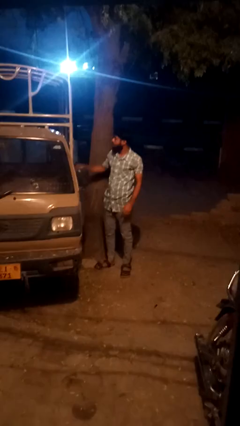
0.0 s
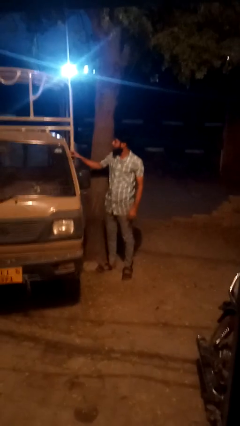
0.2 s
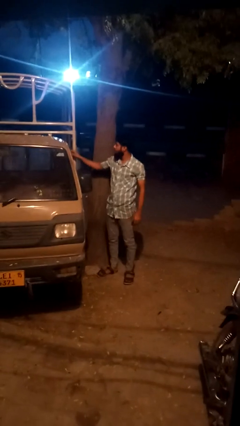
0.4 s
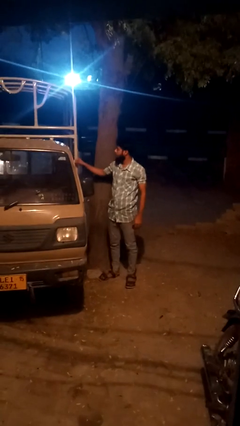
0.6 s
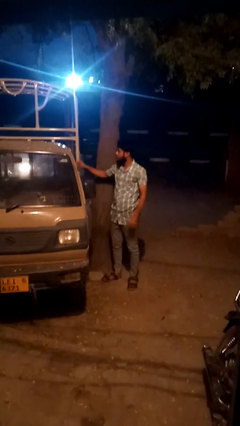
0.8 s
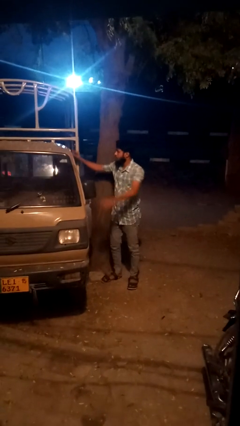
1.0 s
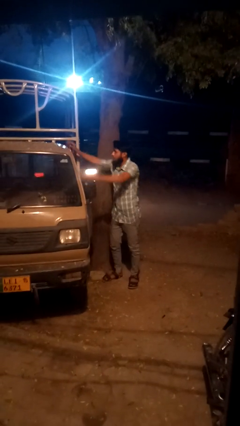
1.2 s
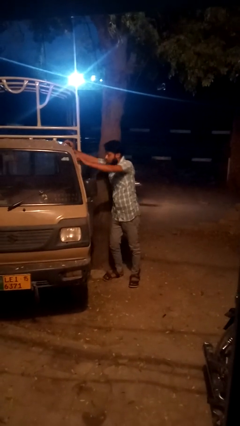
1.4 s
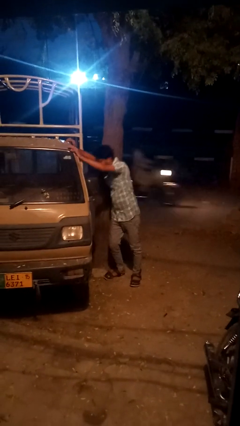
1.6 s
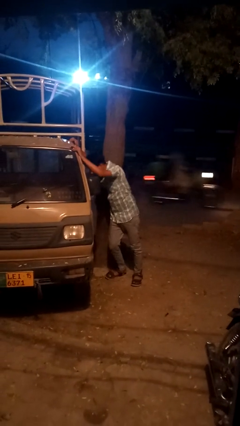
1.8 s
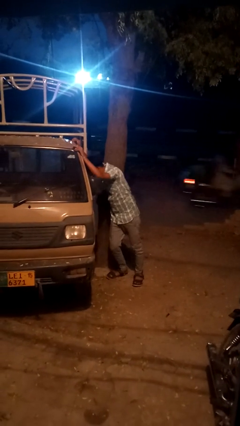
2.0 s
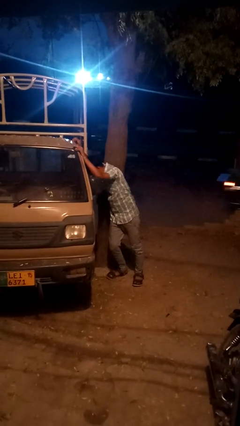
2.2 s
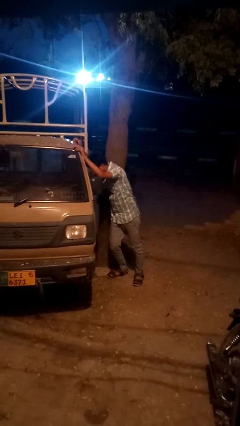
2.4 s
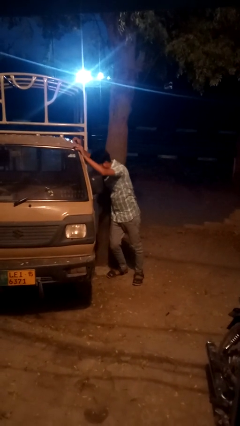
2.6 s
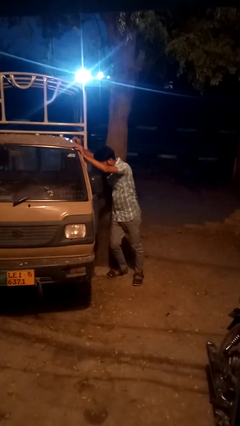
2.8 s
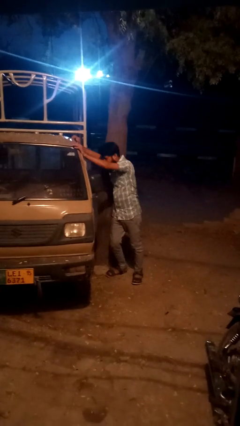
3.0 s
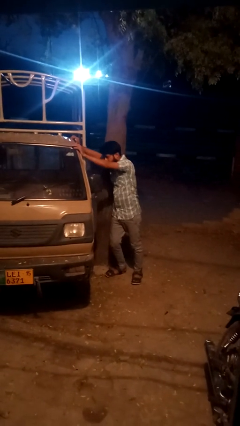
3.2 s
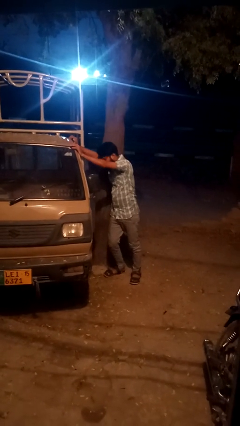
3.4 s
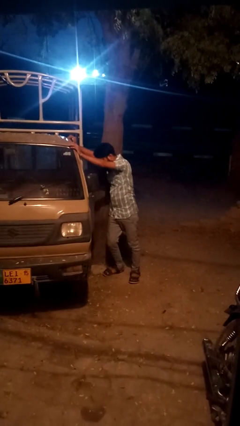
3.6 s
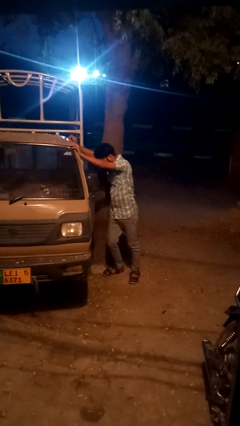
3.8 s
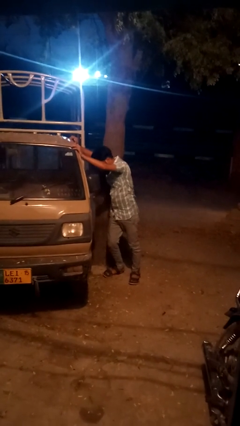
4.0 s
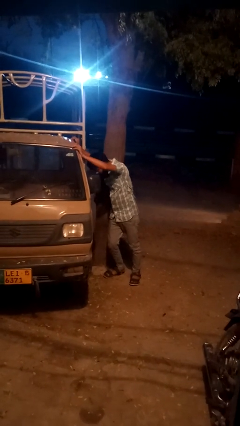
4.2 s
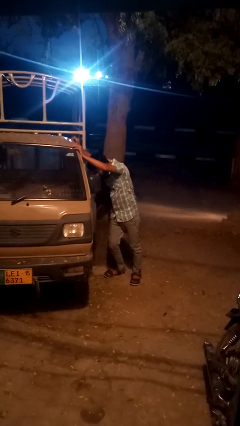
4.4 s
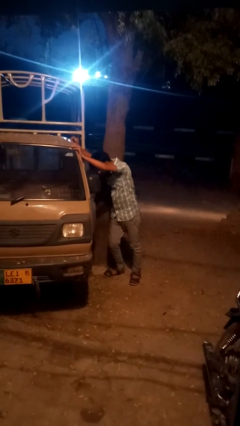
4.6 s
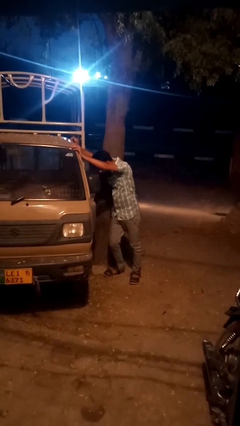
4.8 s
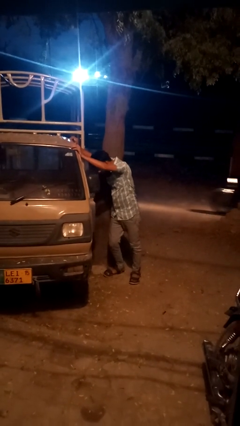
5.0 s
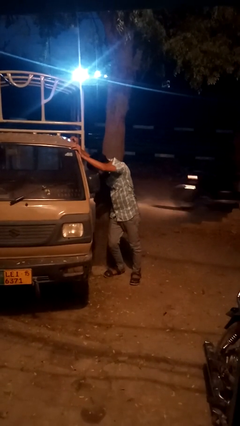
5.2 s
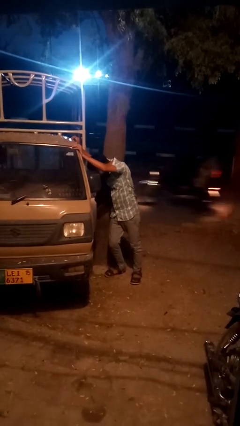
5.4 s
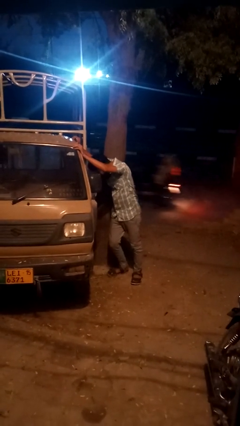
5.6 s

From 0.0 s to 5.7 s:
person leans against car

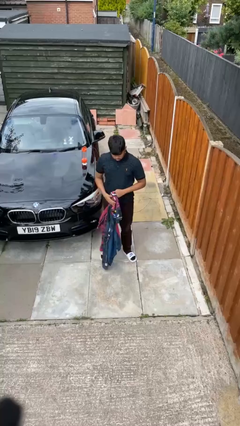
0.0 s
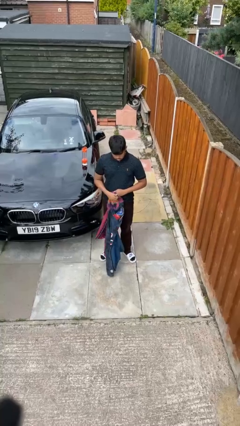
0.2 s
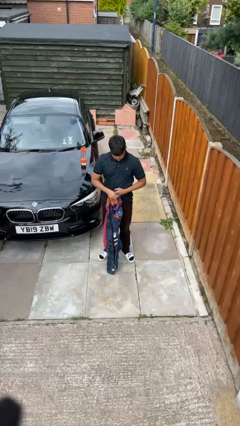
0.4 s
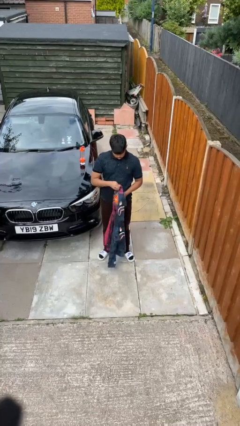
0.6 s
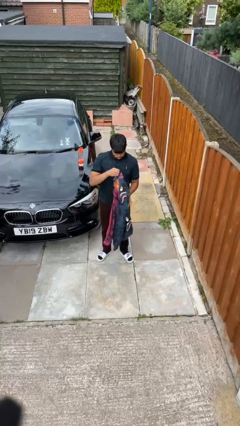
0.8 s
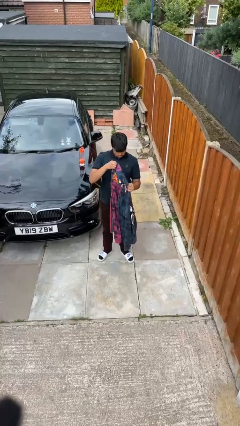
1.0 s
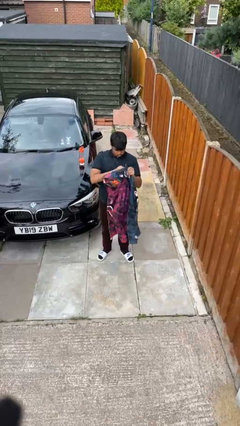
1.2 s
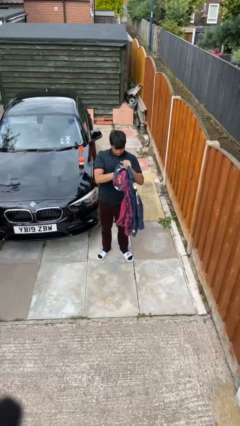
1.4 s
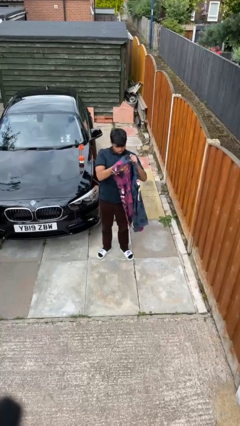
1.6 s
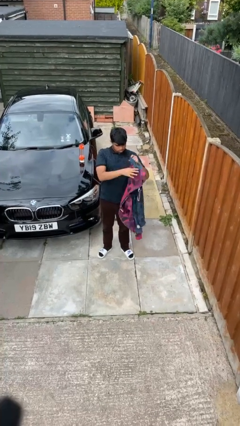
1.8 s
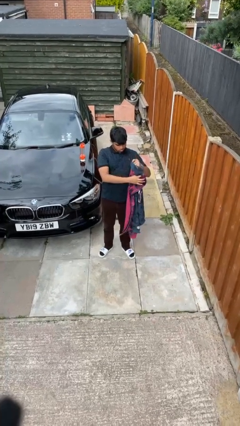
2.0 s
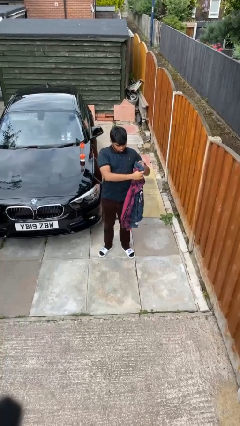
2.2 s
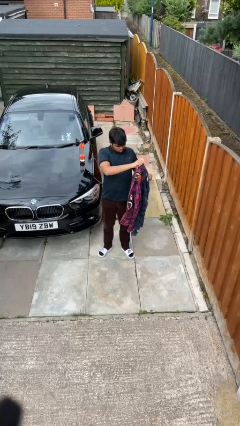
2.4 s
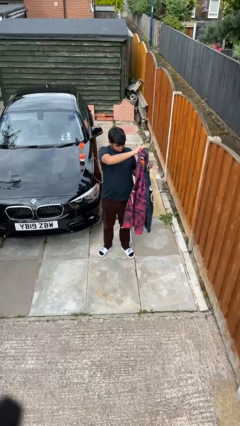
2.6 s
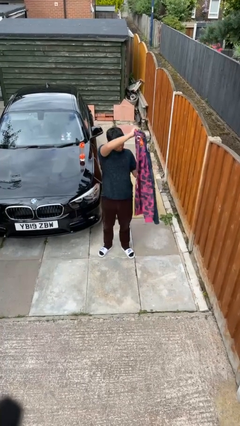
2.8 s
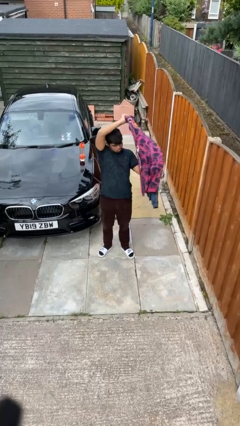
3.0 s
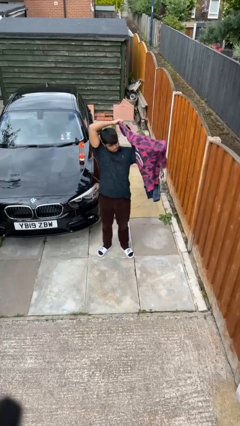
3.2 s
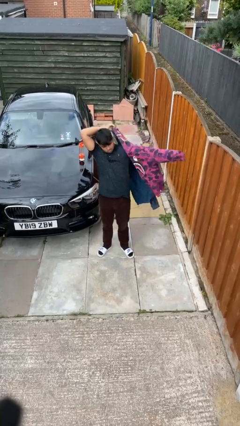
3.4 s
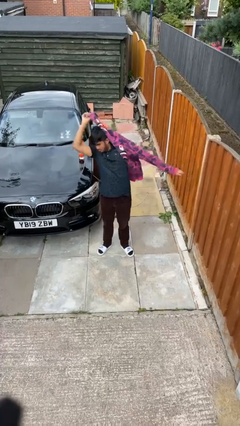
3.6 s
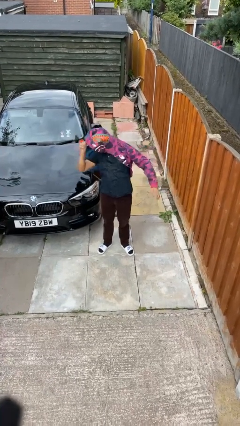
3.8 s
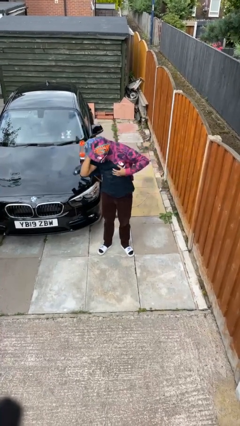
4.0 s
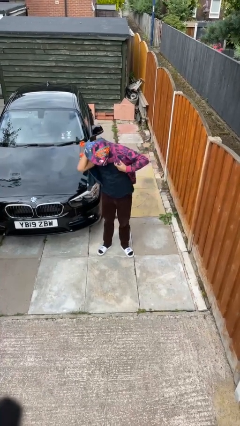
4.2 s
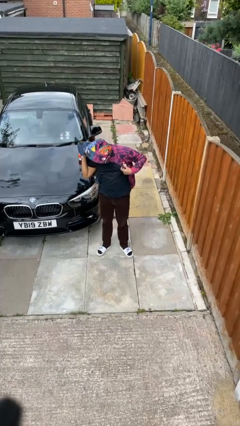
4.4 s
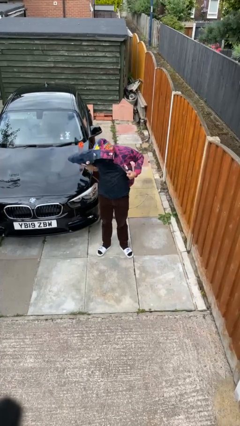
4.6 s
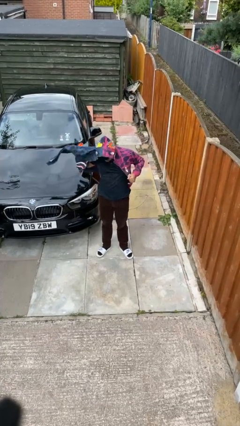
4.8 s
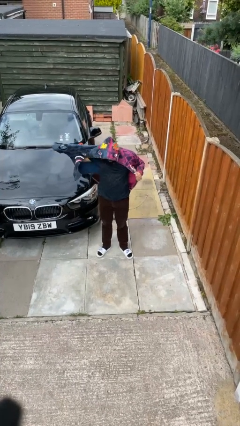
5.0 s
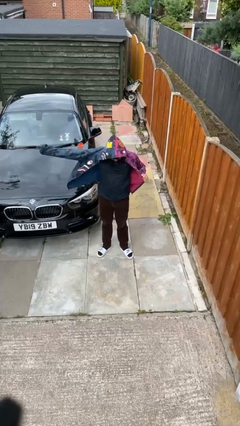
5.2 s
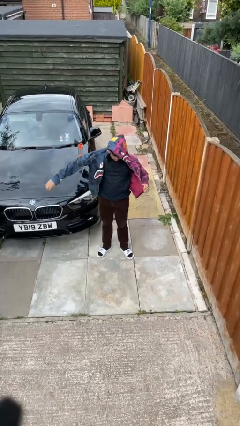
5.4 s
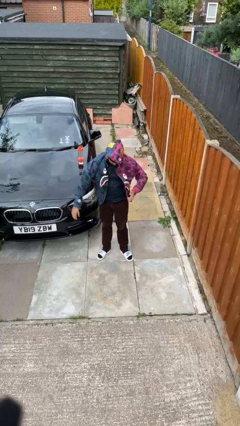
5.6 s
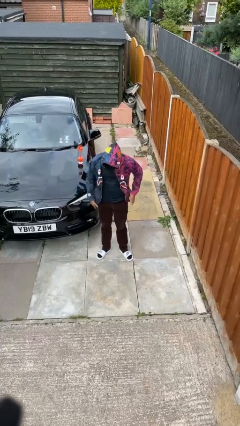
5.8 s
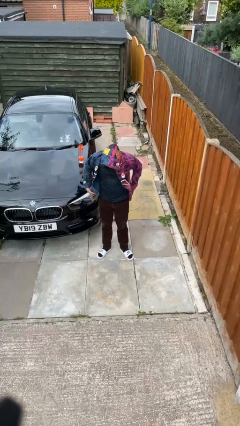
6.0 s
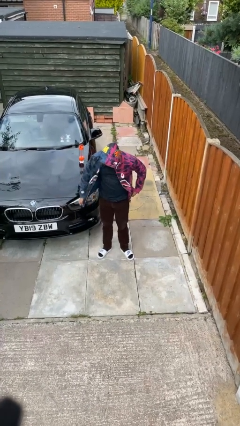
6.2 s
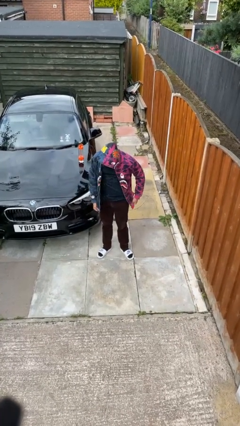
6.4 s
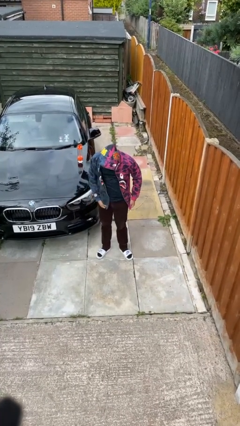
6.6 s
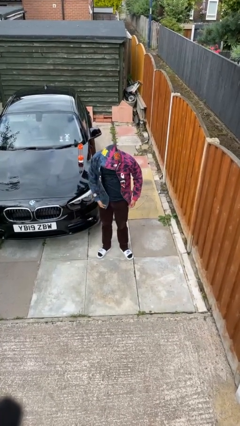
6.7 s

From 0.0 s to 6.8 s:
person puts on jacket

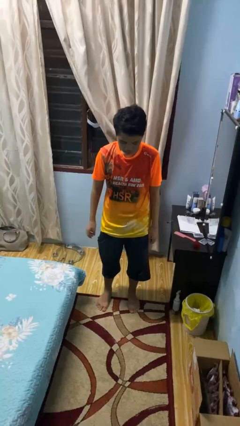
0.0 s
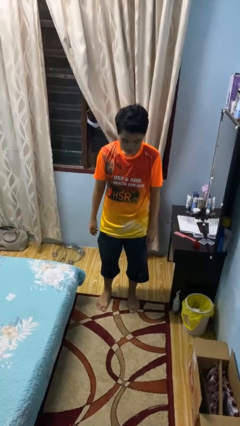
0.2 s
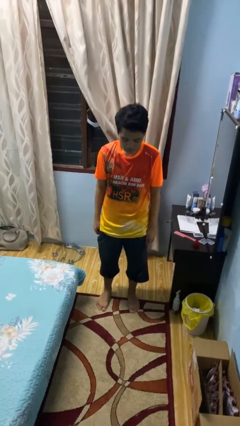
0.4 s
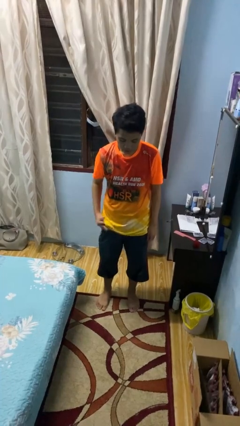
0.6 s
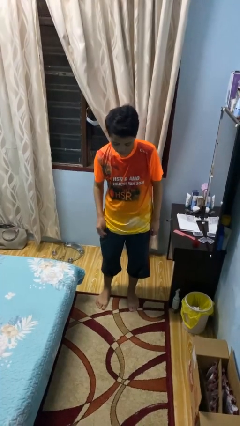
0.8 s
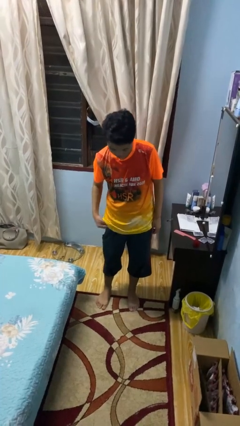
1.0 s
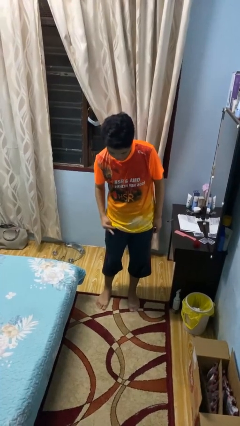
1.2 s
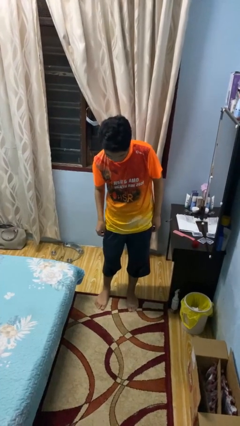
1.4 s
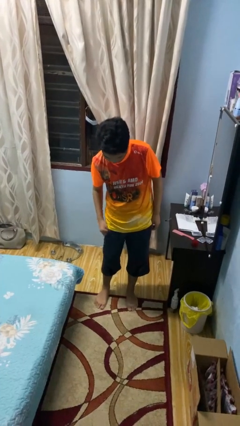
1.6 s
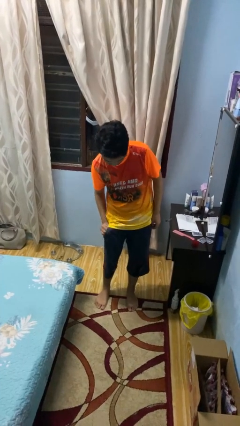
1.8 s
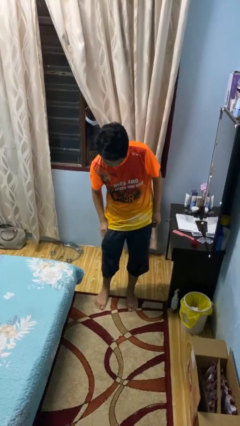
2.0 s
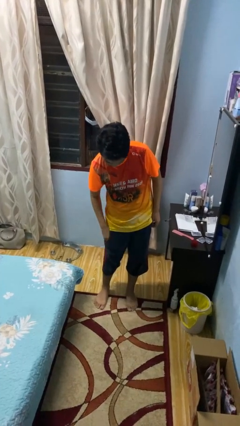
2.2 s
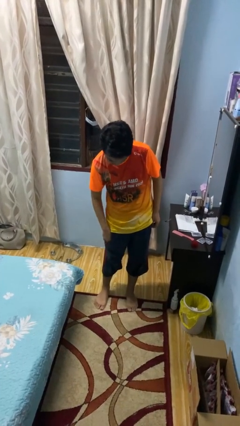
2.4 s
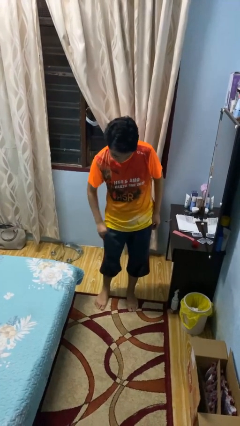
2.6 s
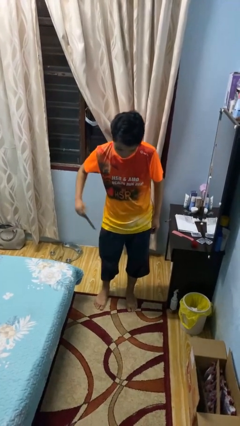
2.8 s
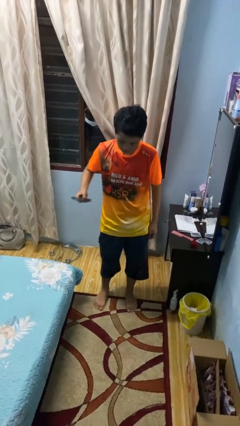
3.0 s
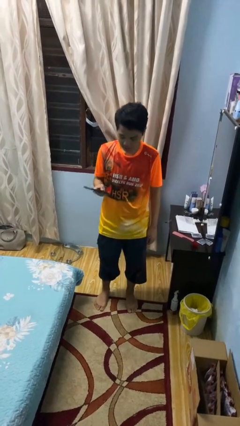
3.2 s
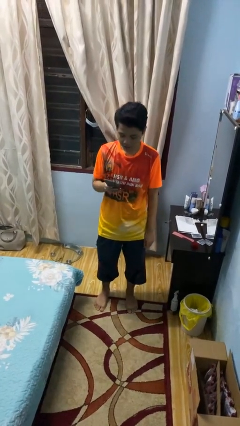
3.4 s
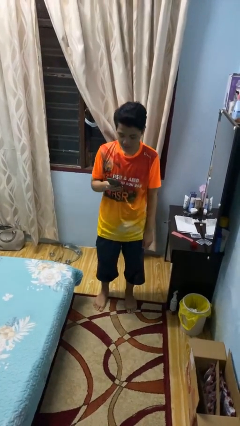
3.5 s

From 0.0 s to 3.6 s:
person takes phone from pocket

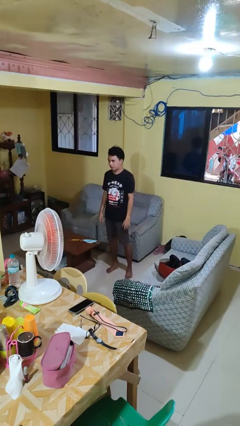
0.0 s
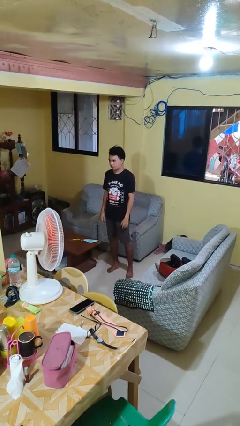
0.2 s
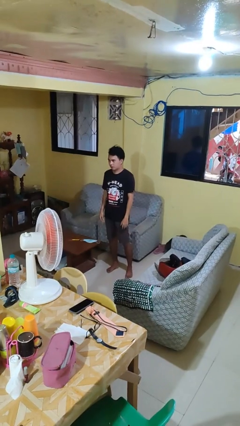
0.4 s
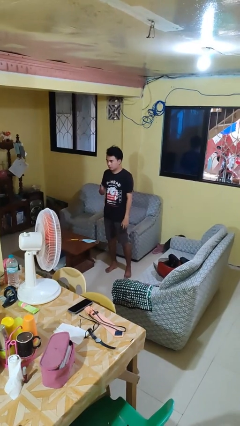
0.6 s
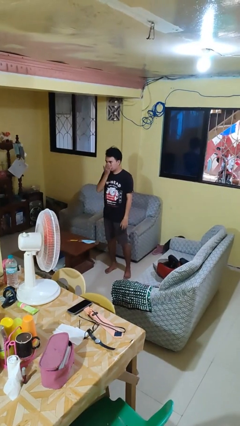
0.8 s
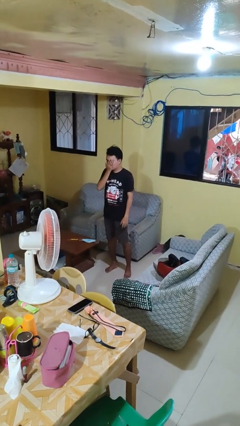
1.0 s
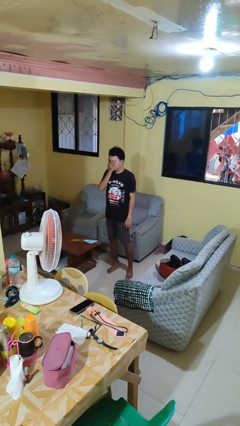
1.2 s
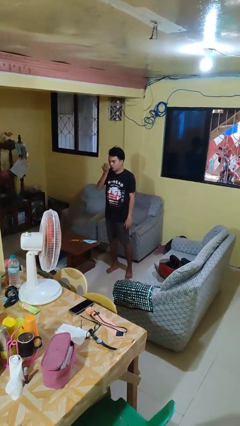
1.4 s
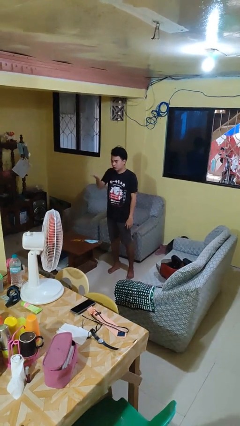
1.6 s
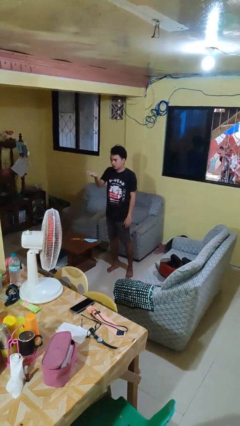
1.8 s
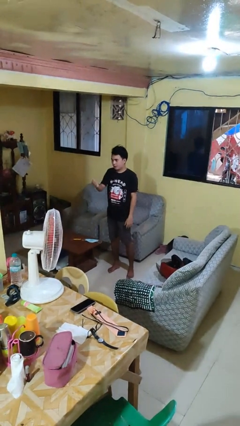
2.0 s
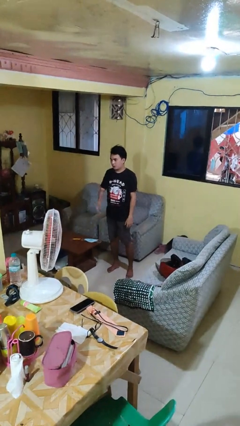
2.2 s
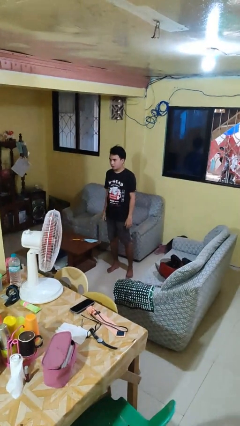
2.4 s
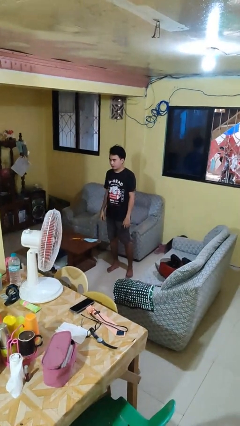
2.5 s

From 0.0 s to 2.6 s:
person gestures blow kiss
